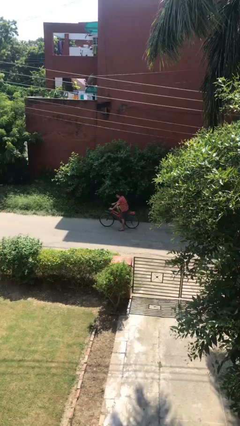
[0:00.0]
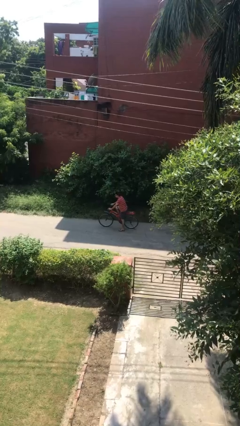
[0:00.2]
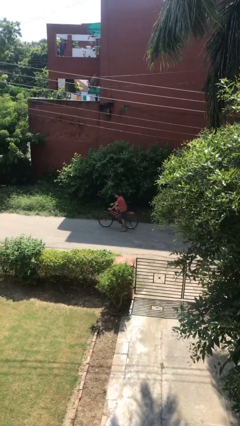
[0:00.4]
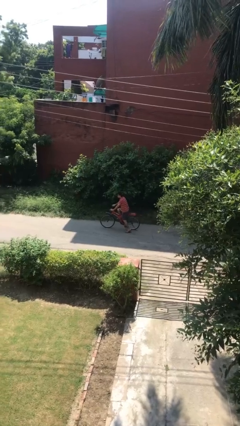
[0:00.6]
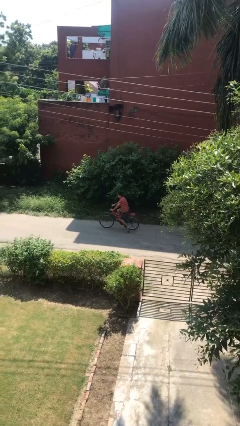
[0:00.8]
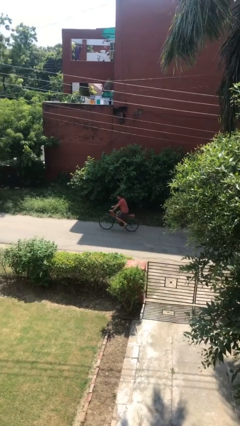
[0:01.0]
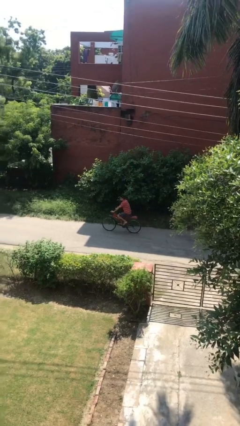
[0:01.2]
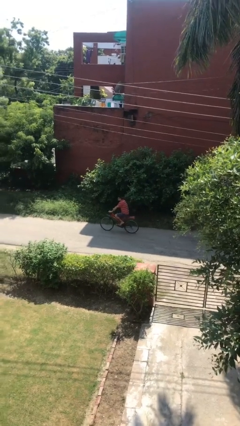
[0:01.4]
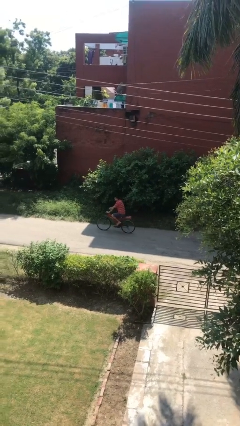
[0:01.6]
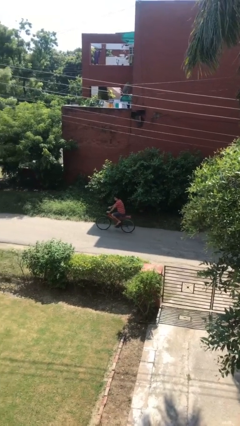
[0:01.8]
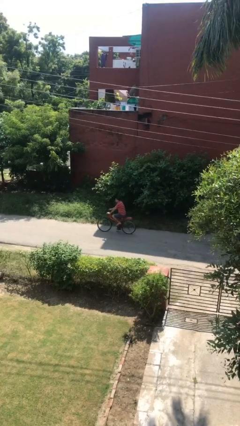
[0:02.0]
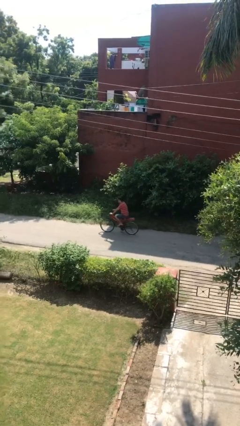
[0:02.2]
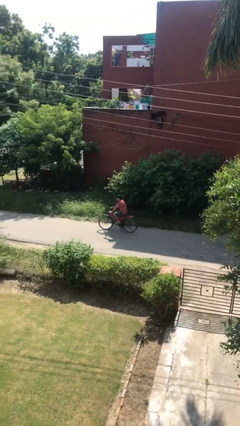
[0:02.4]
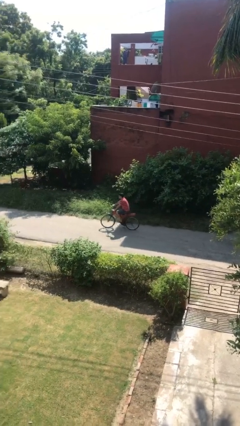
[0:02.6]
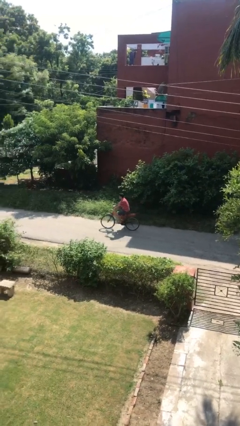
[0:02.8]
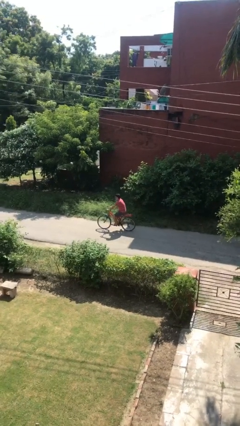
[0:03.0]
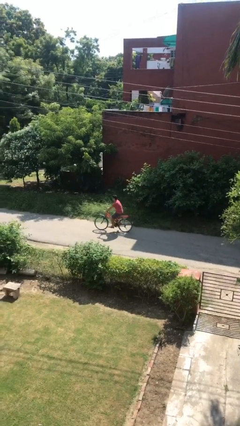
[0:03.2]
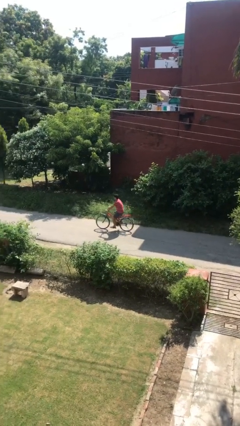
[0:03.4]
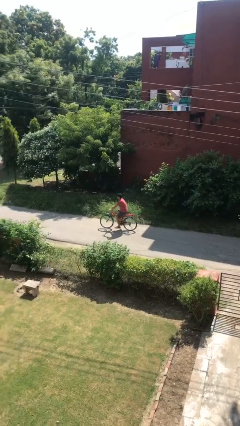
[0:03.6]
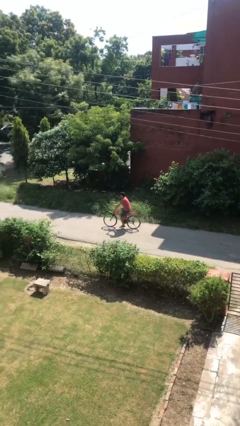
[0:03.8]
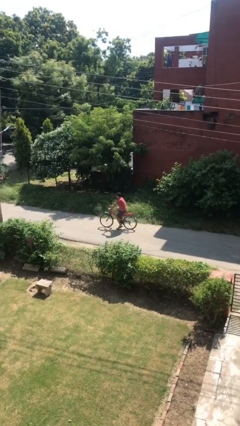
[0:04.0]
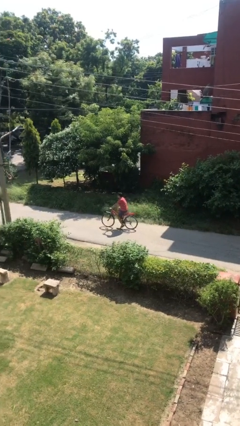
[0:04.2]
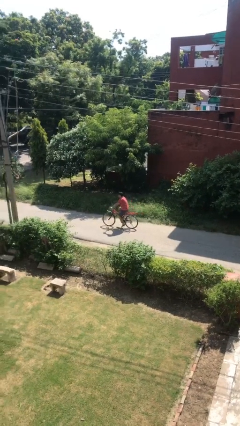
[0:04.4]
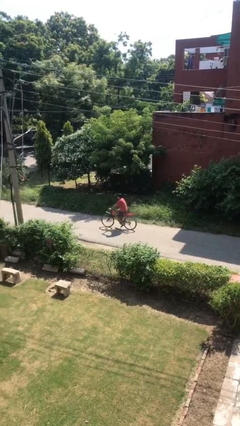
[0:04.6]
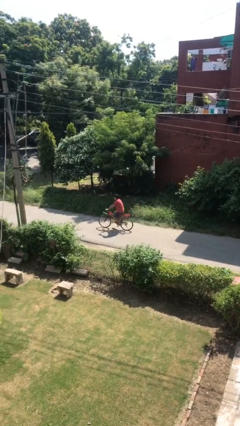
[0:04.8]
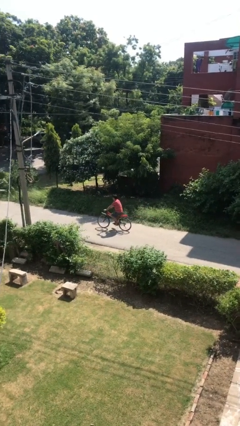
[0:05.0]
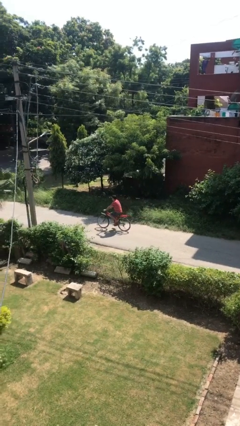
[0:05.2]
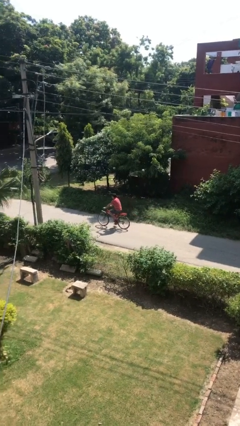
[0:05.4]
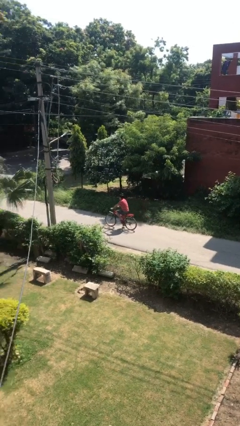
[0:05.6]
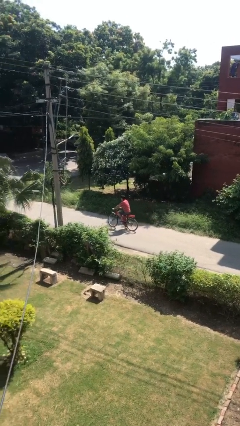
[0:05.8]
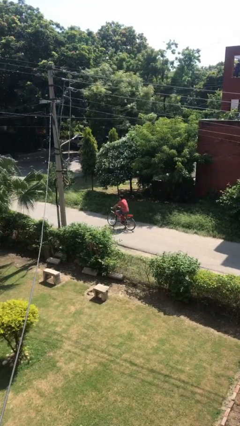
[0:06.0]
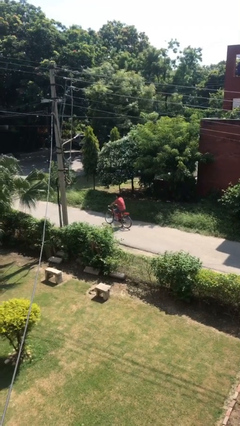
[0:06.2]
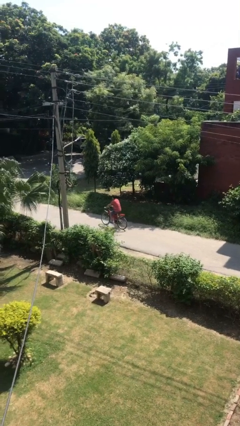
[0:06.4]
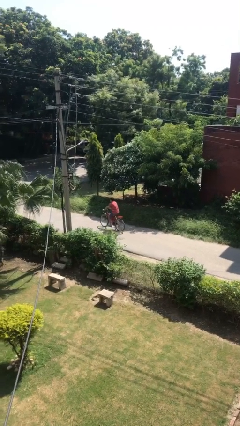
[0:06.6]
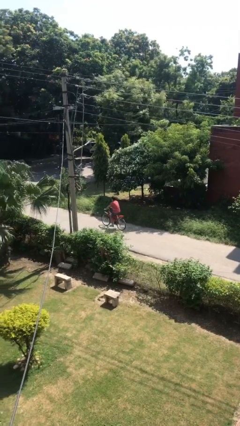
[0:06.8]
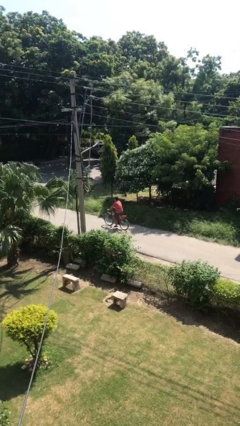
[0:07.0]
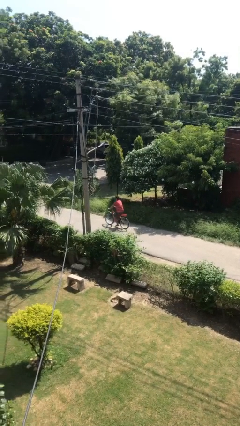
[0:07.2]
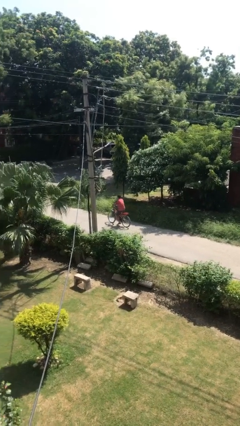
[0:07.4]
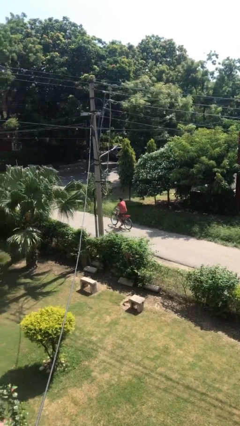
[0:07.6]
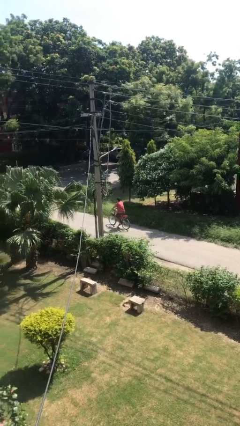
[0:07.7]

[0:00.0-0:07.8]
person rides bicycle

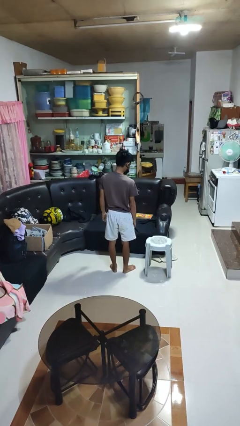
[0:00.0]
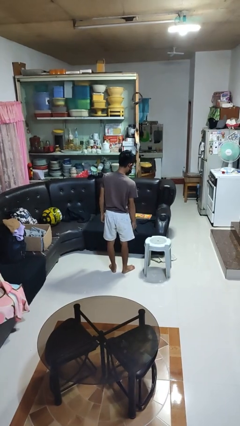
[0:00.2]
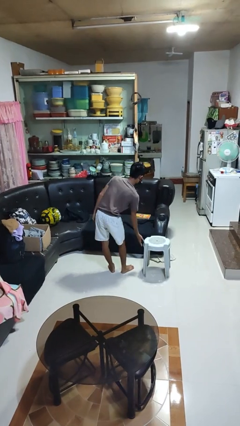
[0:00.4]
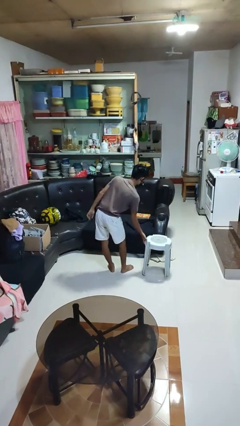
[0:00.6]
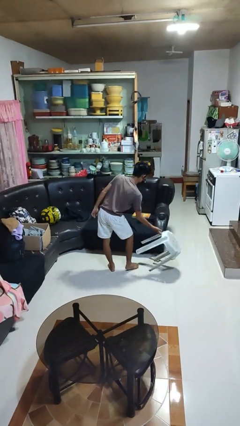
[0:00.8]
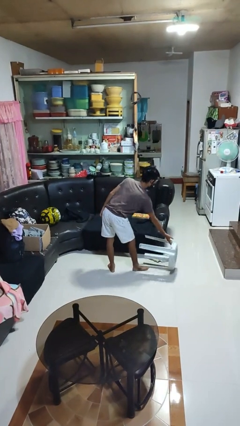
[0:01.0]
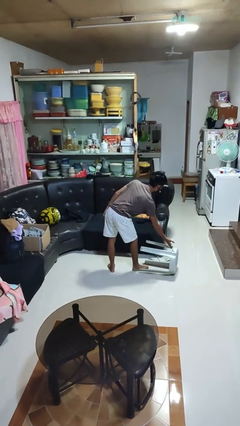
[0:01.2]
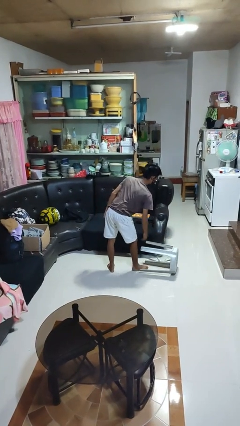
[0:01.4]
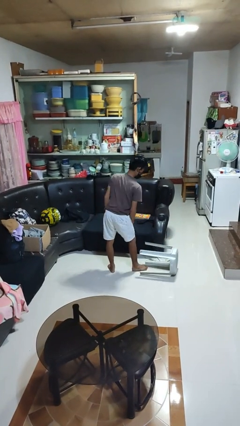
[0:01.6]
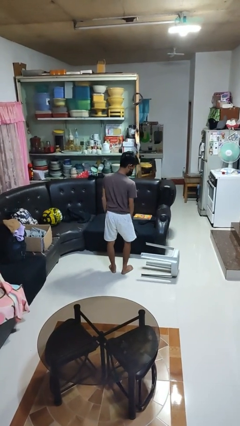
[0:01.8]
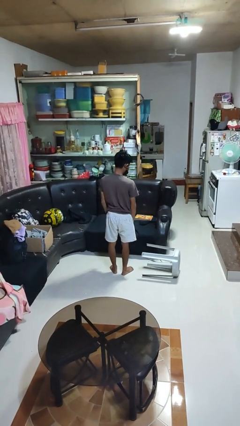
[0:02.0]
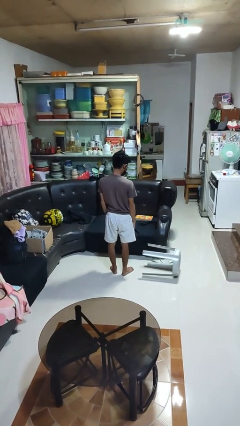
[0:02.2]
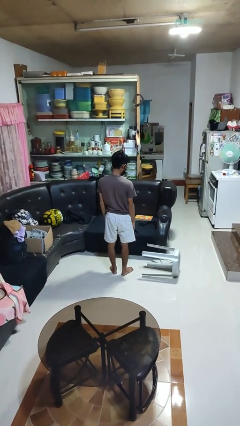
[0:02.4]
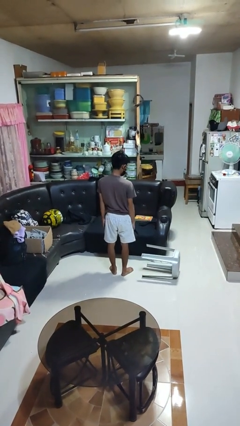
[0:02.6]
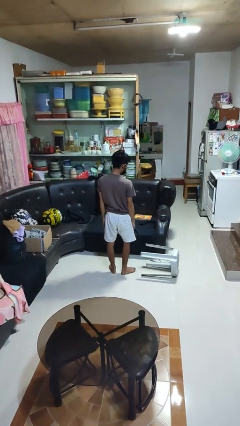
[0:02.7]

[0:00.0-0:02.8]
person knocks over furniture

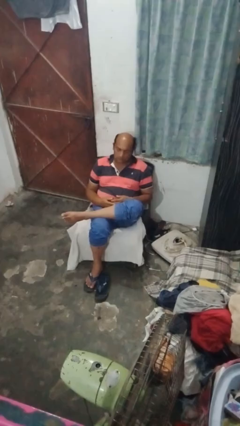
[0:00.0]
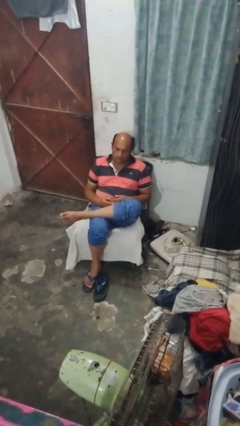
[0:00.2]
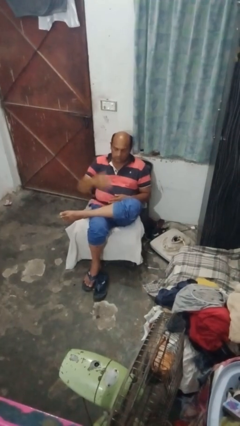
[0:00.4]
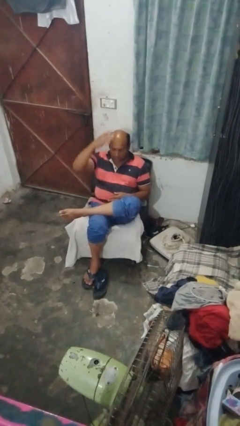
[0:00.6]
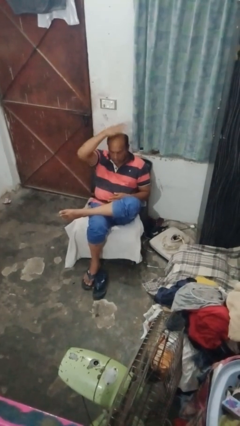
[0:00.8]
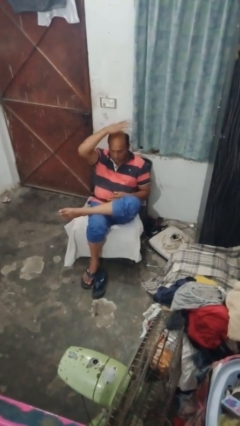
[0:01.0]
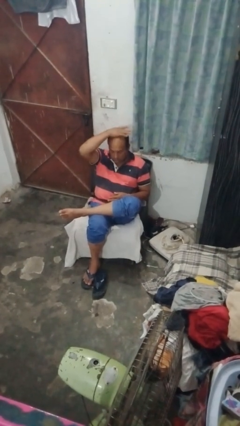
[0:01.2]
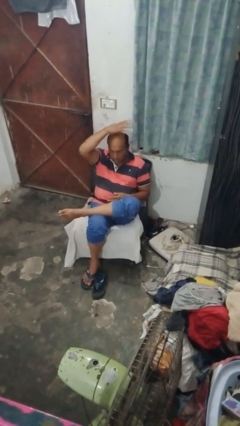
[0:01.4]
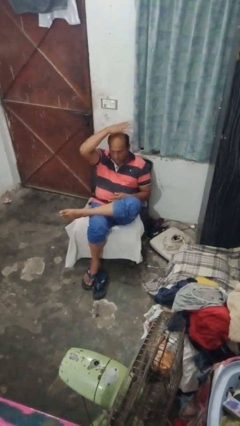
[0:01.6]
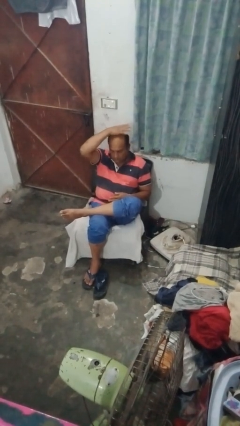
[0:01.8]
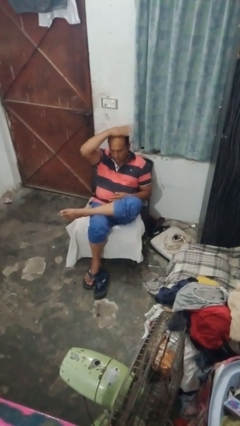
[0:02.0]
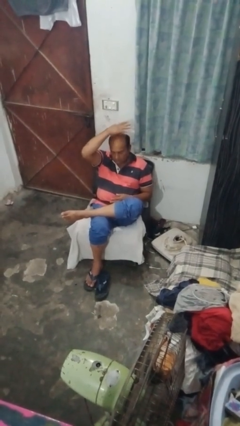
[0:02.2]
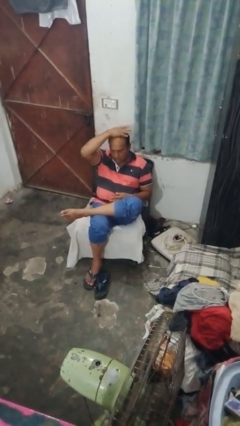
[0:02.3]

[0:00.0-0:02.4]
person pats head

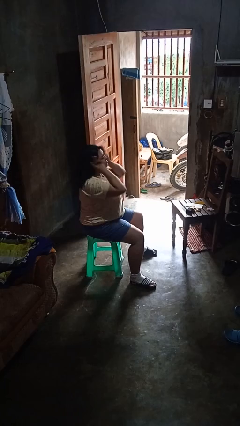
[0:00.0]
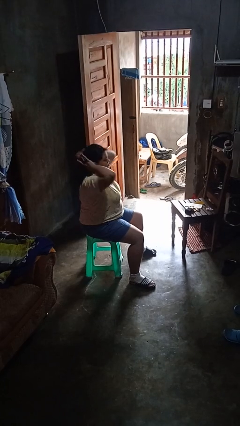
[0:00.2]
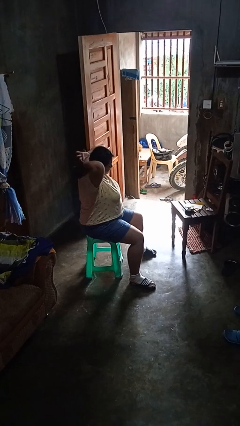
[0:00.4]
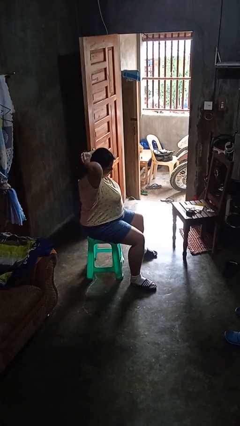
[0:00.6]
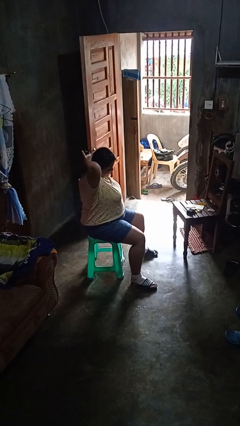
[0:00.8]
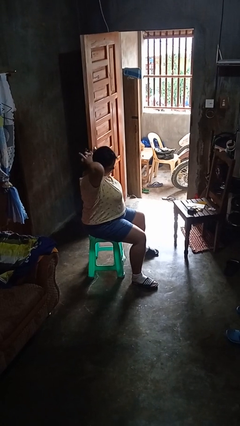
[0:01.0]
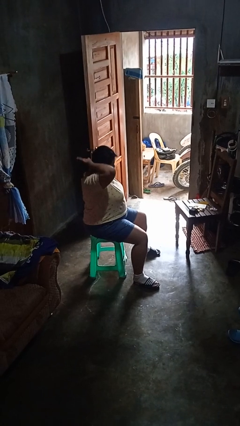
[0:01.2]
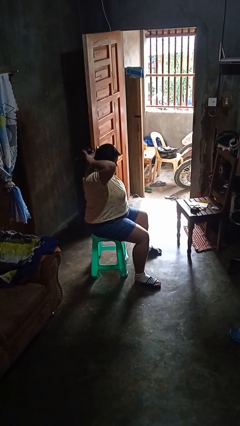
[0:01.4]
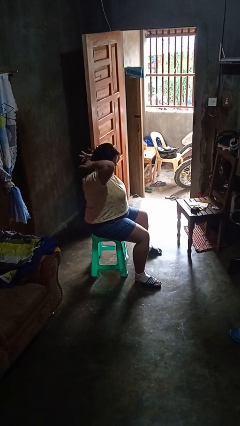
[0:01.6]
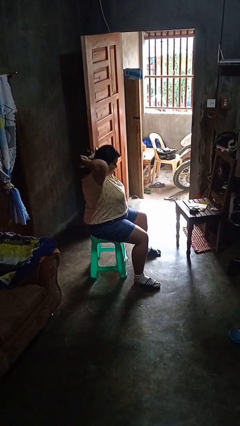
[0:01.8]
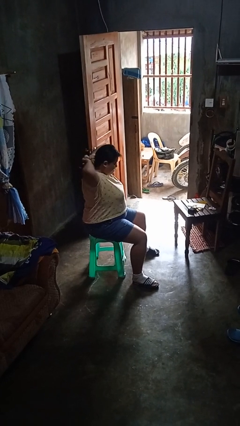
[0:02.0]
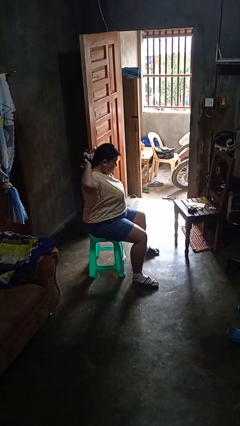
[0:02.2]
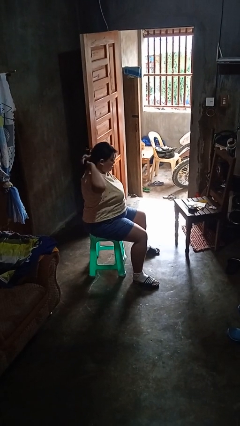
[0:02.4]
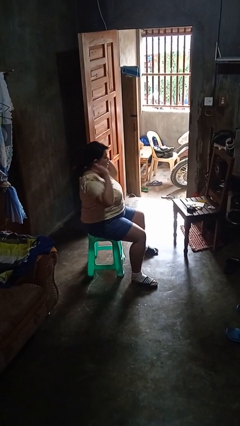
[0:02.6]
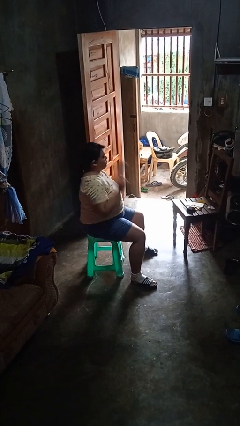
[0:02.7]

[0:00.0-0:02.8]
person puts hair in ponytail

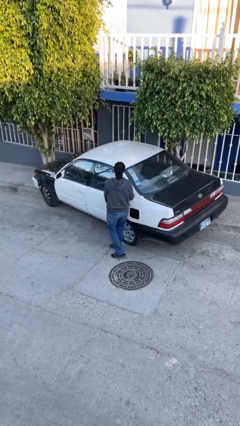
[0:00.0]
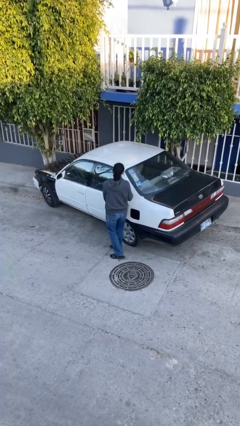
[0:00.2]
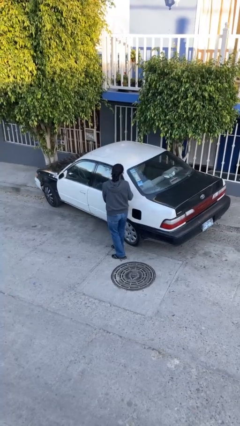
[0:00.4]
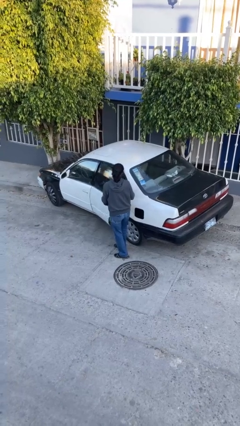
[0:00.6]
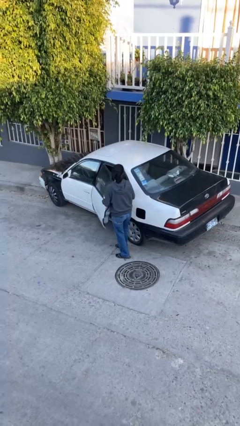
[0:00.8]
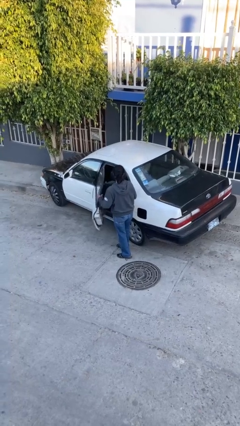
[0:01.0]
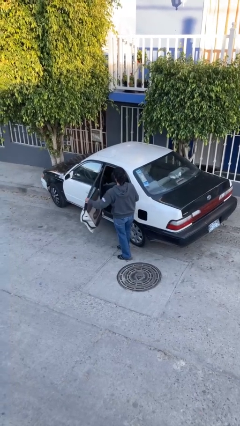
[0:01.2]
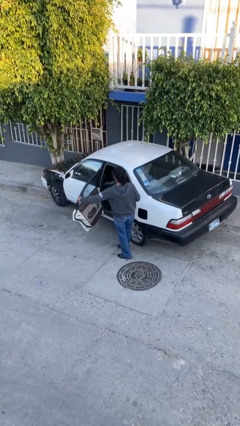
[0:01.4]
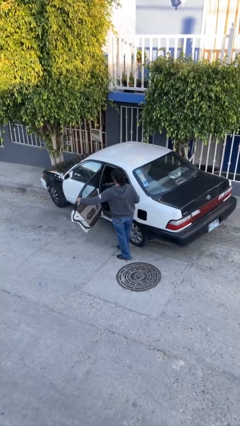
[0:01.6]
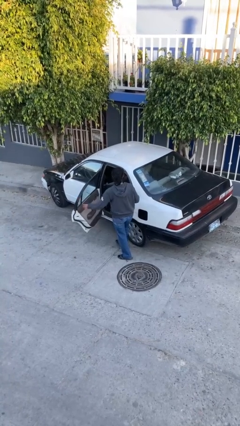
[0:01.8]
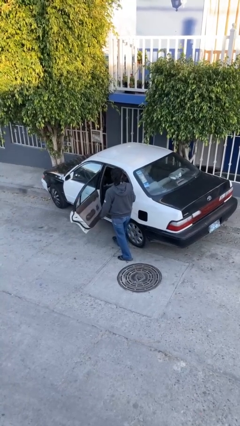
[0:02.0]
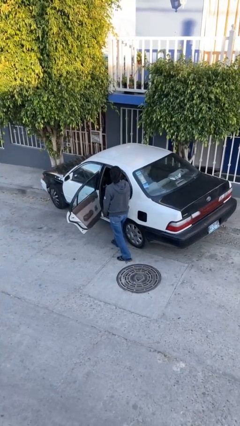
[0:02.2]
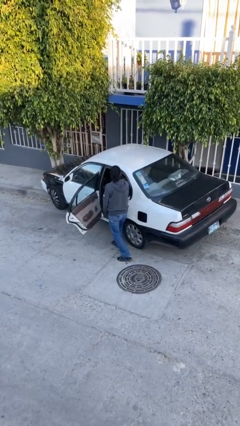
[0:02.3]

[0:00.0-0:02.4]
person opens car door
